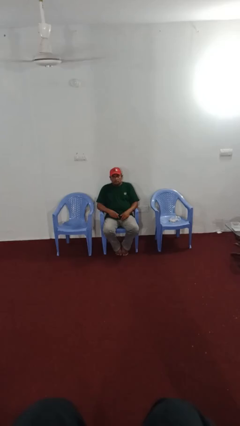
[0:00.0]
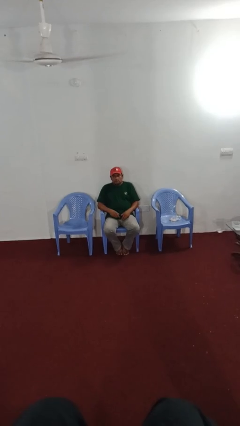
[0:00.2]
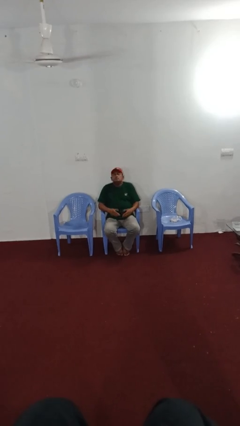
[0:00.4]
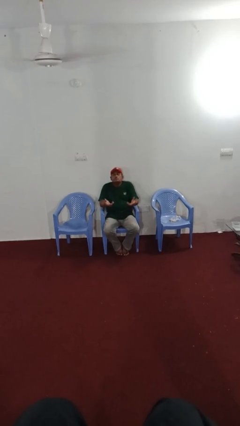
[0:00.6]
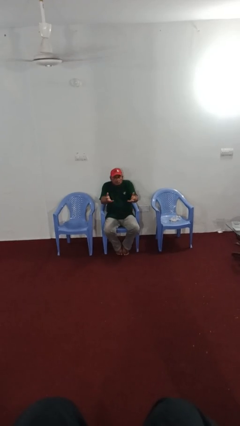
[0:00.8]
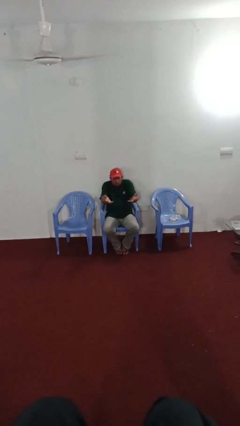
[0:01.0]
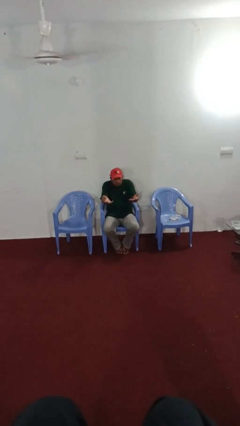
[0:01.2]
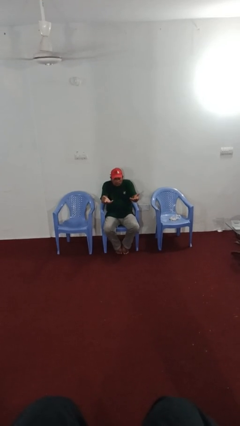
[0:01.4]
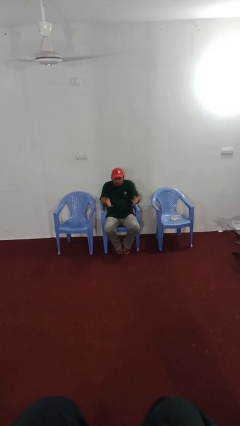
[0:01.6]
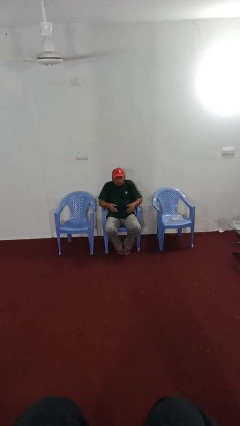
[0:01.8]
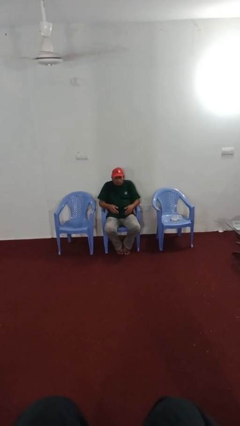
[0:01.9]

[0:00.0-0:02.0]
person shrugs

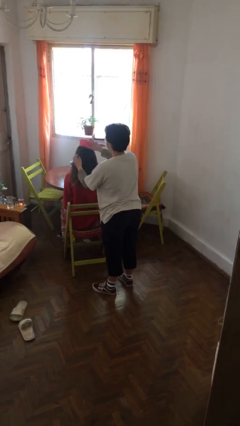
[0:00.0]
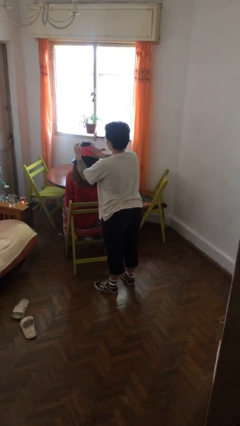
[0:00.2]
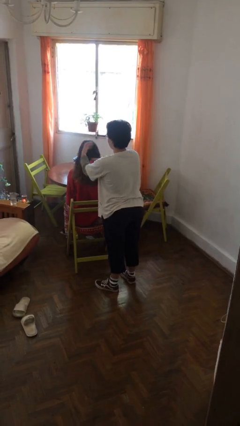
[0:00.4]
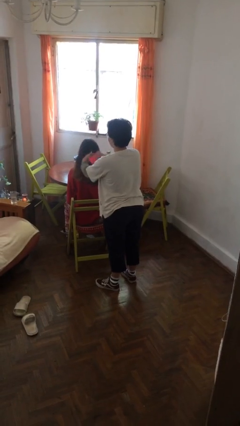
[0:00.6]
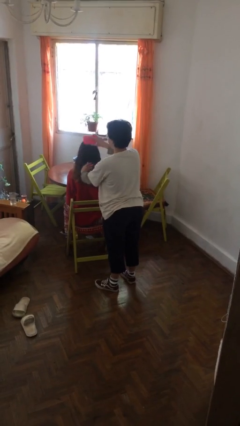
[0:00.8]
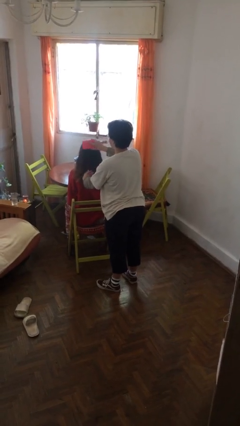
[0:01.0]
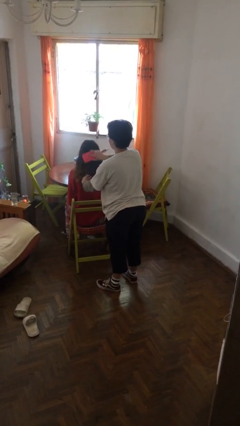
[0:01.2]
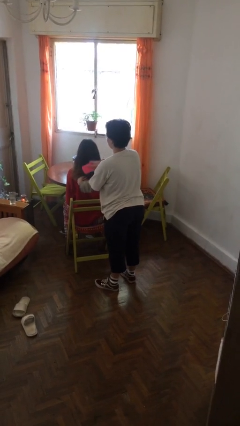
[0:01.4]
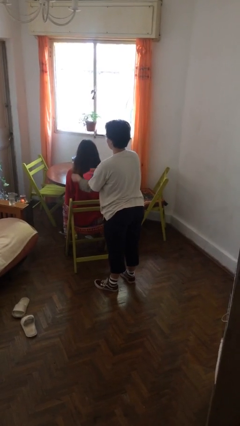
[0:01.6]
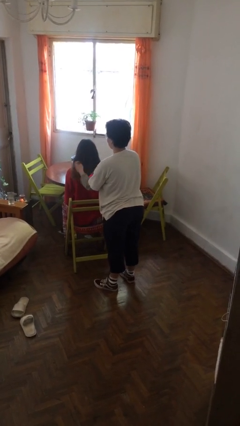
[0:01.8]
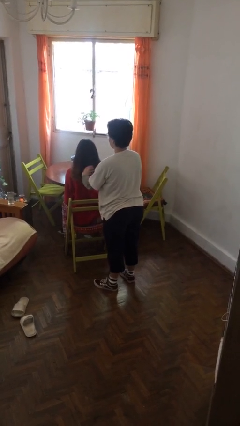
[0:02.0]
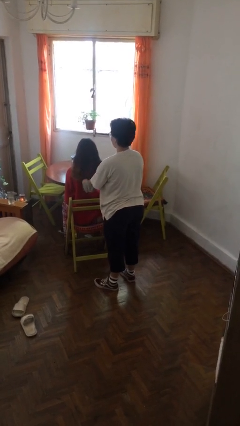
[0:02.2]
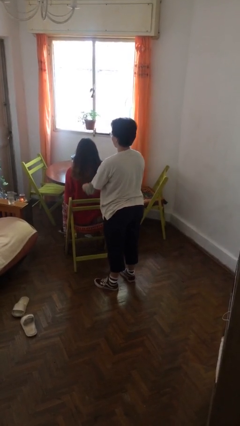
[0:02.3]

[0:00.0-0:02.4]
person brushes hair of person

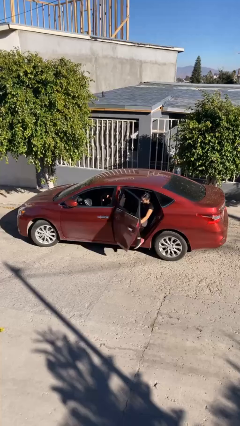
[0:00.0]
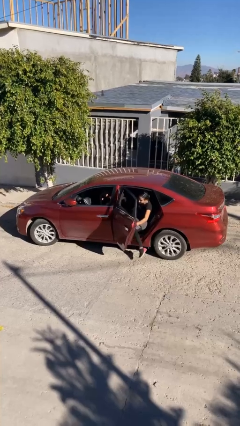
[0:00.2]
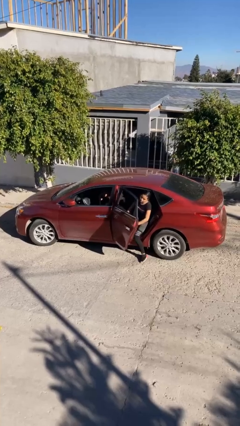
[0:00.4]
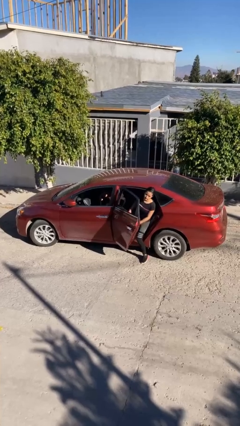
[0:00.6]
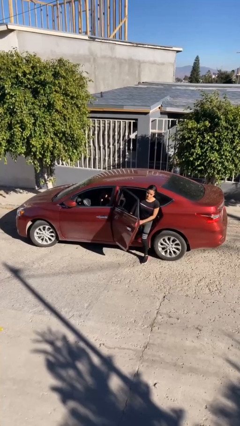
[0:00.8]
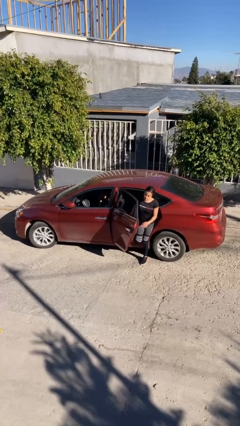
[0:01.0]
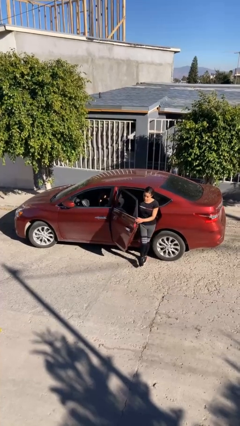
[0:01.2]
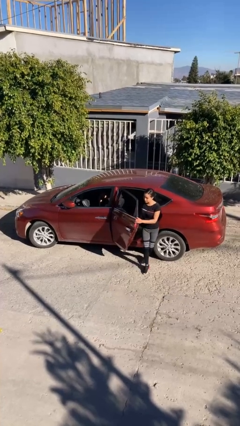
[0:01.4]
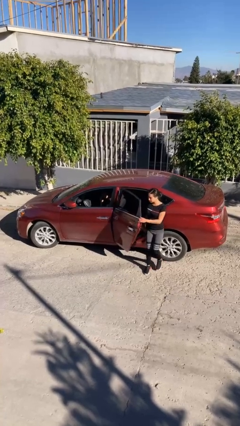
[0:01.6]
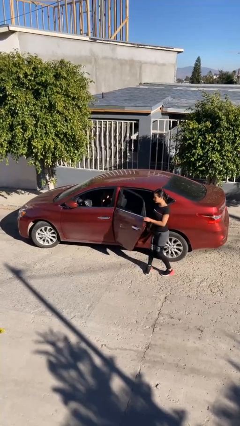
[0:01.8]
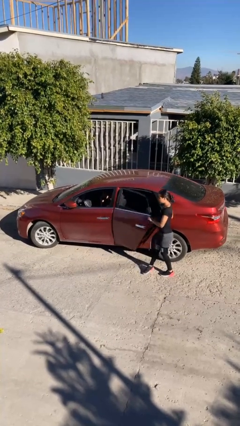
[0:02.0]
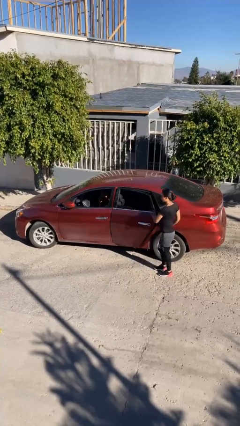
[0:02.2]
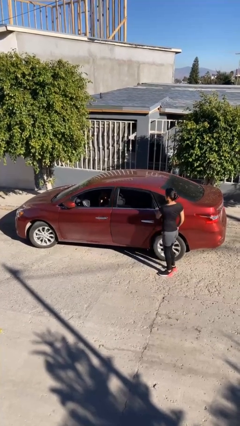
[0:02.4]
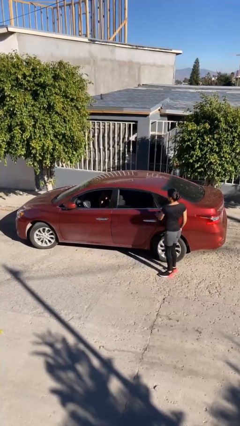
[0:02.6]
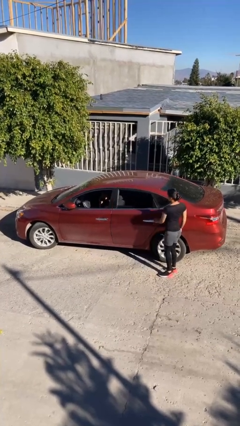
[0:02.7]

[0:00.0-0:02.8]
car drops off person

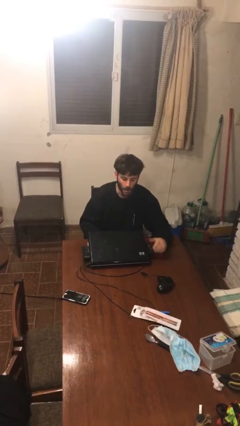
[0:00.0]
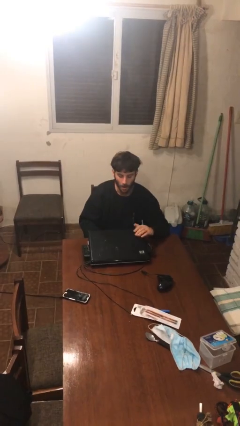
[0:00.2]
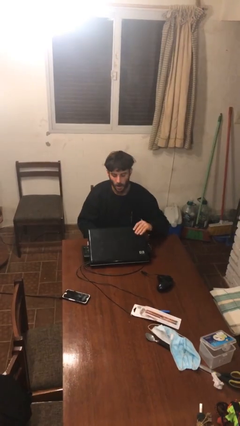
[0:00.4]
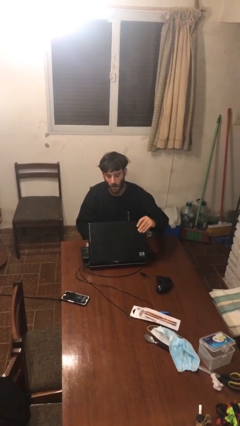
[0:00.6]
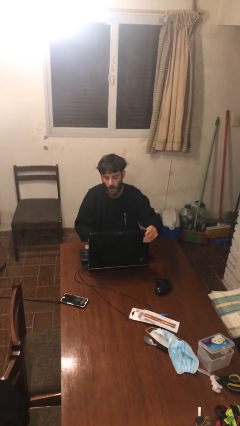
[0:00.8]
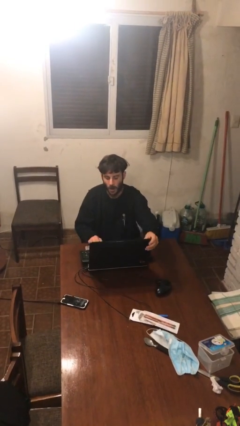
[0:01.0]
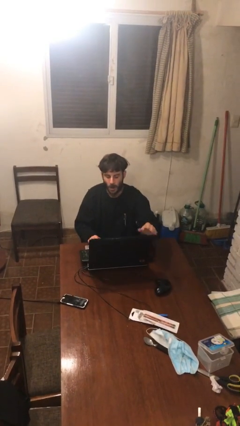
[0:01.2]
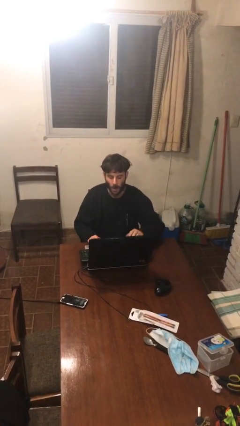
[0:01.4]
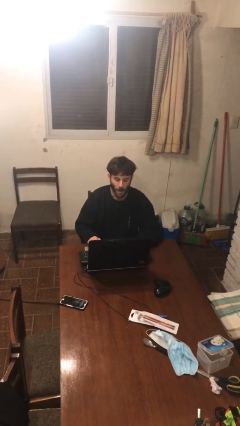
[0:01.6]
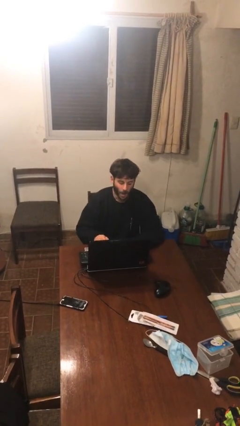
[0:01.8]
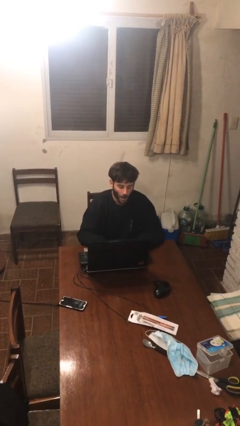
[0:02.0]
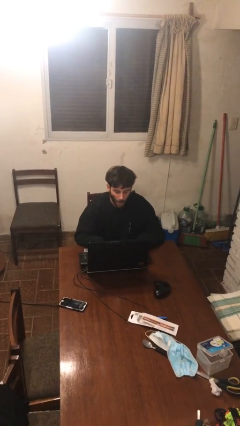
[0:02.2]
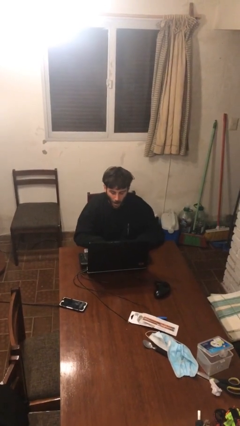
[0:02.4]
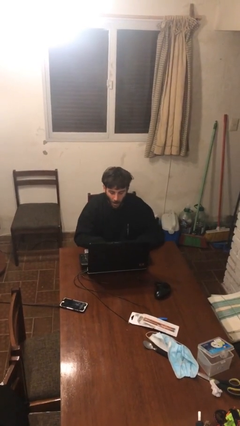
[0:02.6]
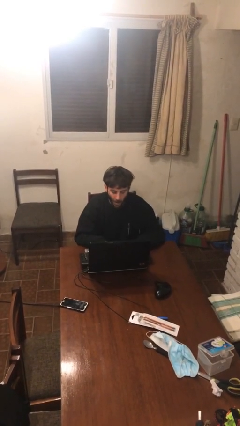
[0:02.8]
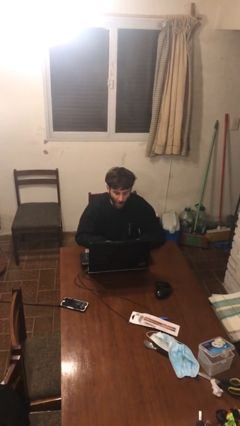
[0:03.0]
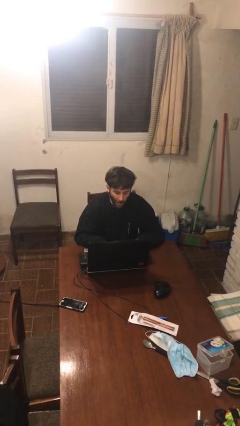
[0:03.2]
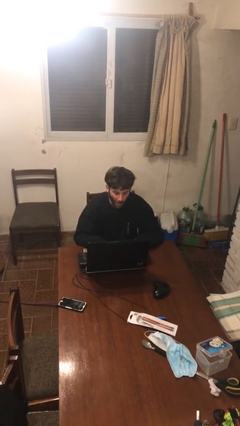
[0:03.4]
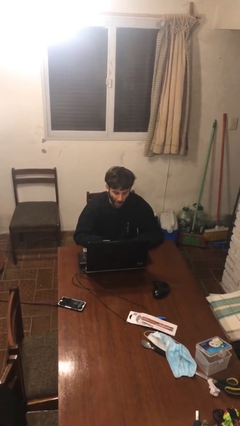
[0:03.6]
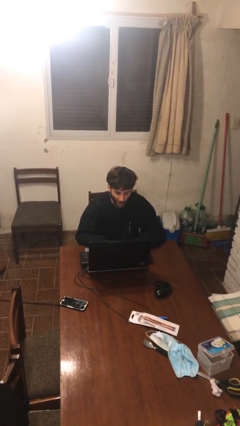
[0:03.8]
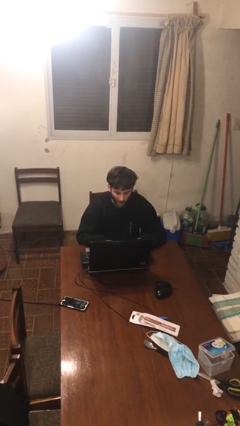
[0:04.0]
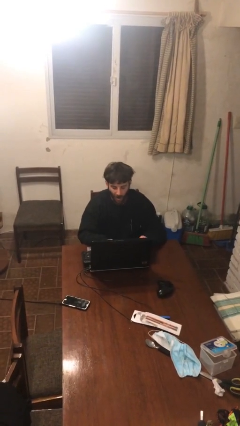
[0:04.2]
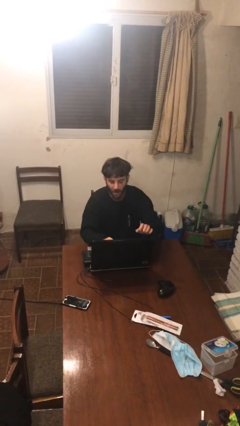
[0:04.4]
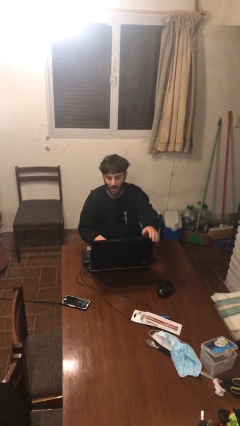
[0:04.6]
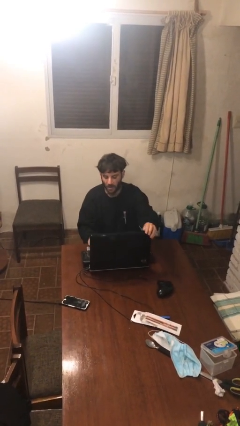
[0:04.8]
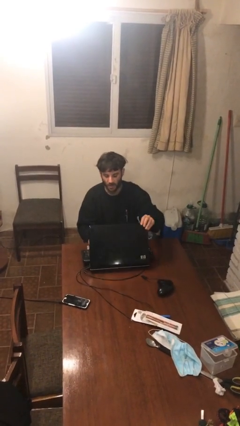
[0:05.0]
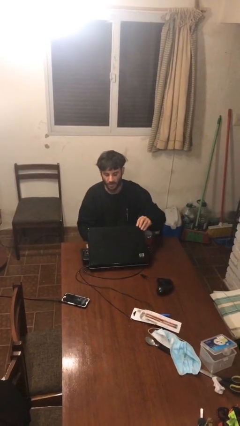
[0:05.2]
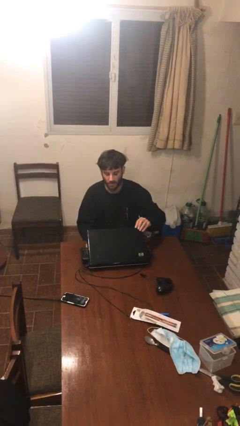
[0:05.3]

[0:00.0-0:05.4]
person interacts with laptop

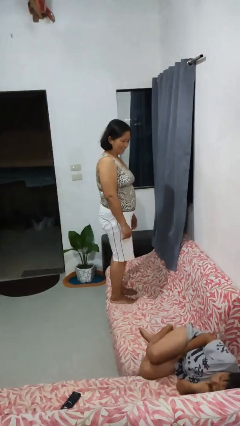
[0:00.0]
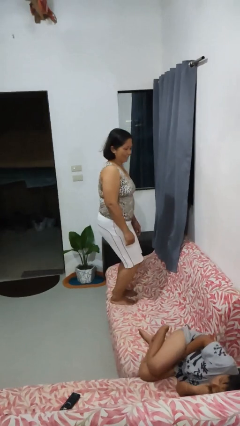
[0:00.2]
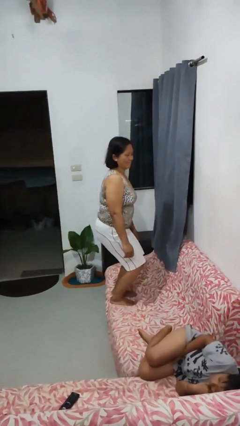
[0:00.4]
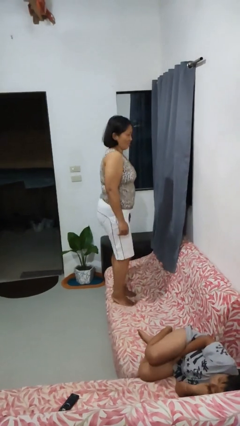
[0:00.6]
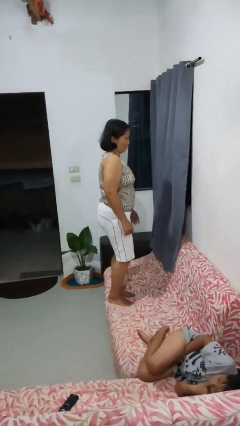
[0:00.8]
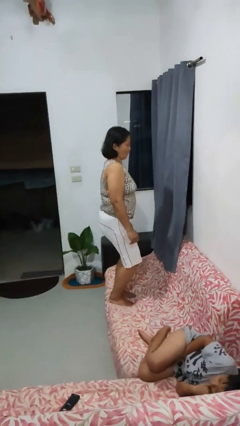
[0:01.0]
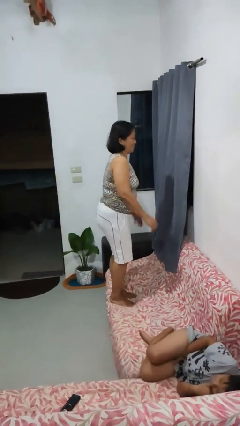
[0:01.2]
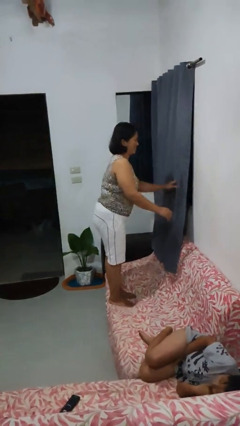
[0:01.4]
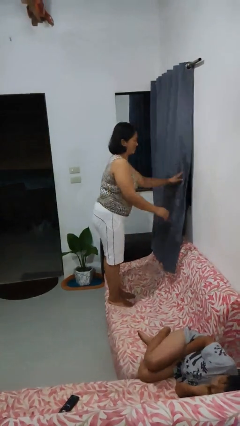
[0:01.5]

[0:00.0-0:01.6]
person jumps on couch

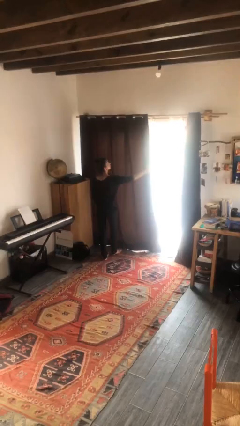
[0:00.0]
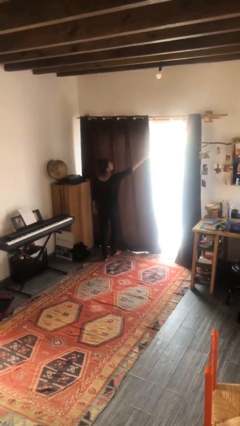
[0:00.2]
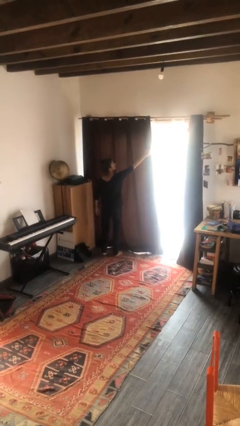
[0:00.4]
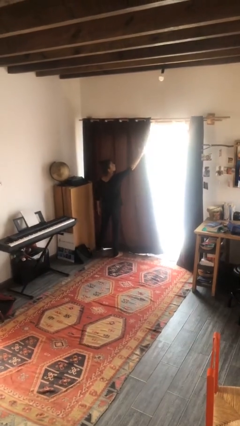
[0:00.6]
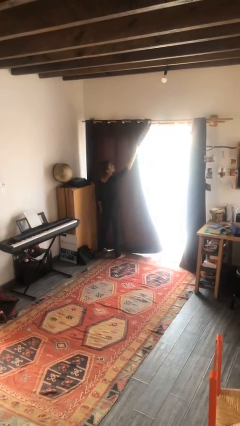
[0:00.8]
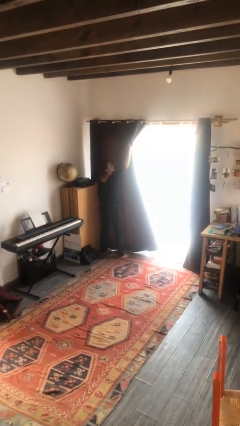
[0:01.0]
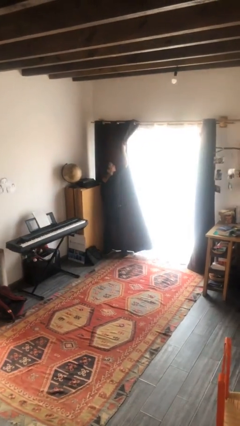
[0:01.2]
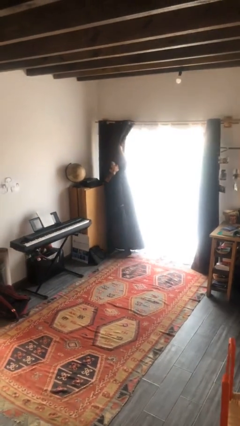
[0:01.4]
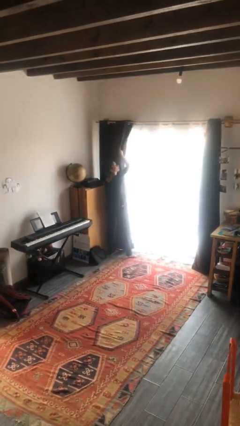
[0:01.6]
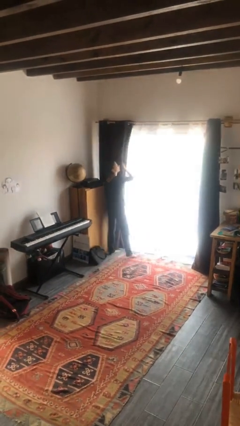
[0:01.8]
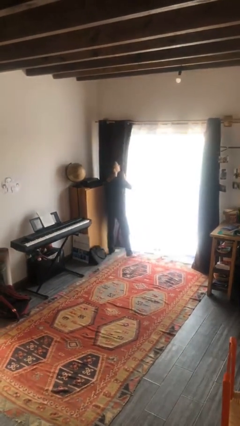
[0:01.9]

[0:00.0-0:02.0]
person opens curtains

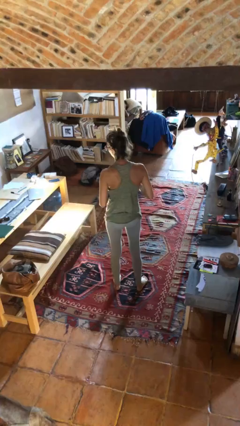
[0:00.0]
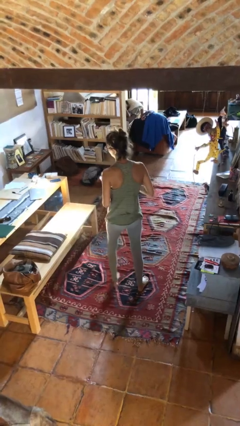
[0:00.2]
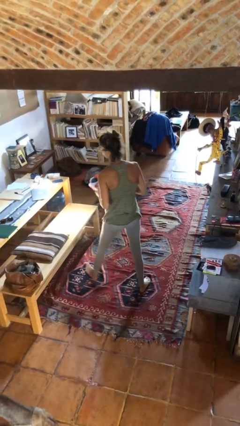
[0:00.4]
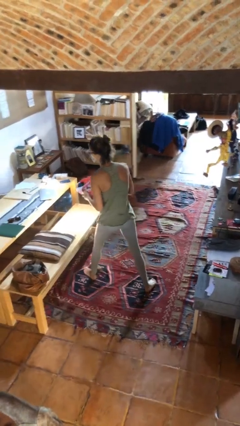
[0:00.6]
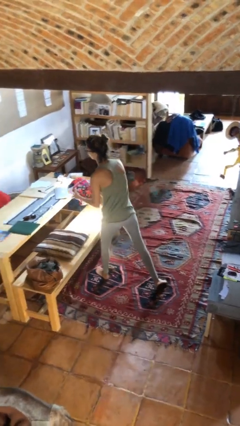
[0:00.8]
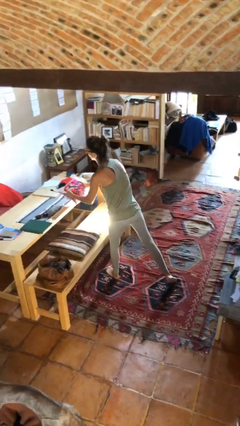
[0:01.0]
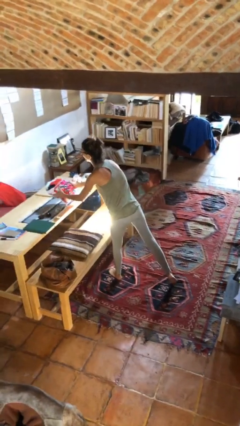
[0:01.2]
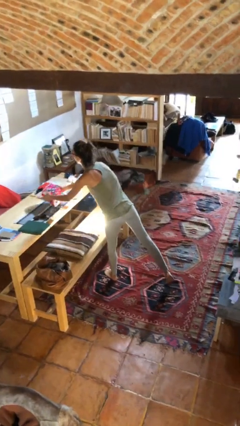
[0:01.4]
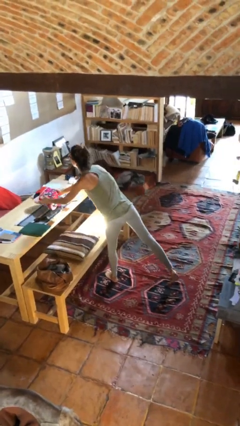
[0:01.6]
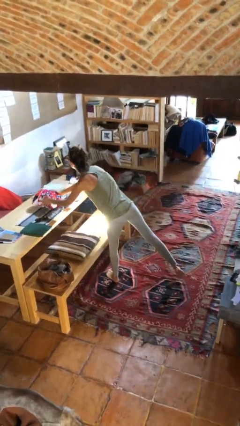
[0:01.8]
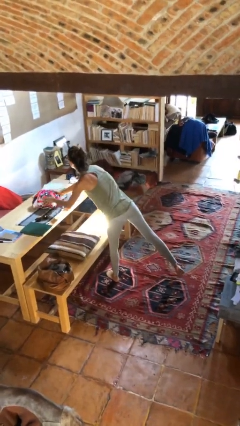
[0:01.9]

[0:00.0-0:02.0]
person puts down object on table
